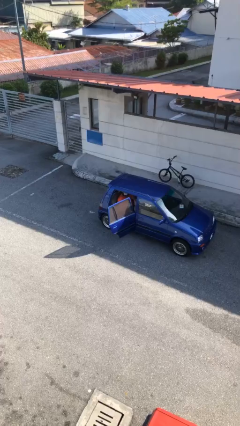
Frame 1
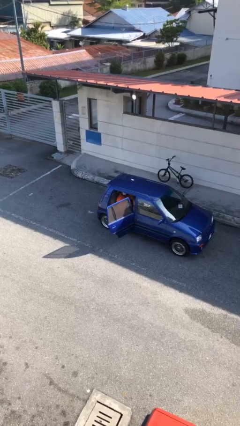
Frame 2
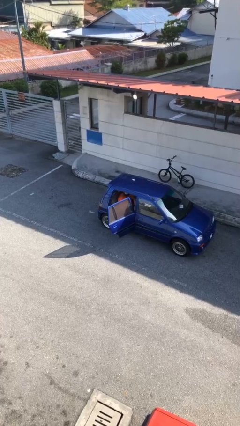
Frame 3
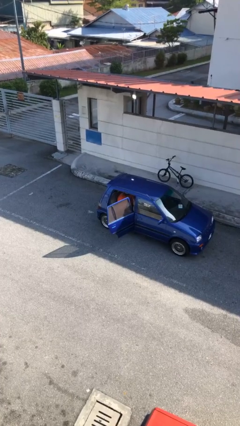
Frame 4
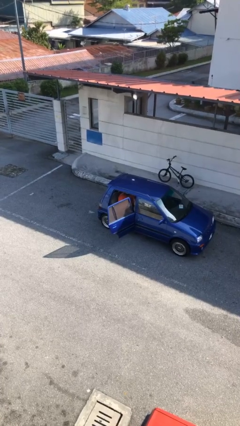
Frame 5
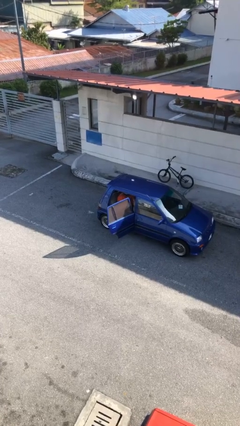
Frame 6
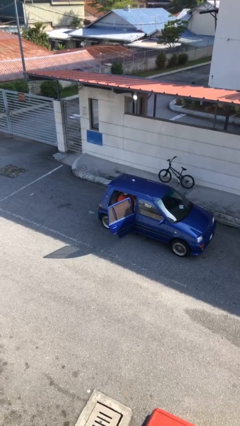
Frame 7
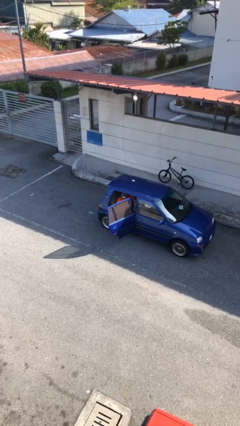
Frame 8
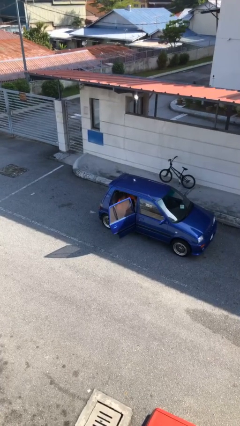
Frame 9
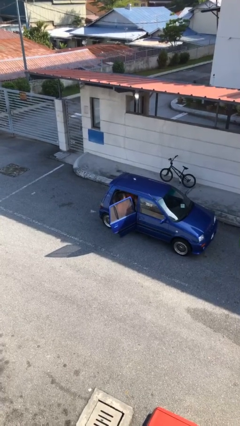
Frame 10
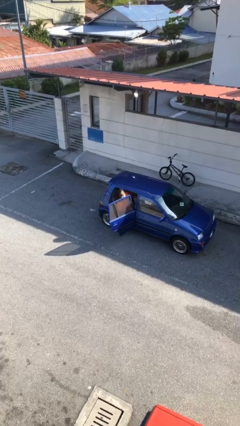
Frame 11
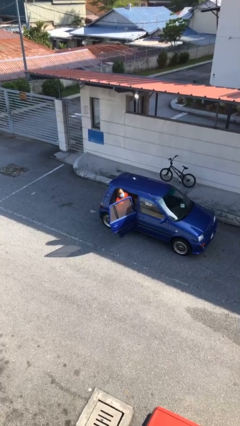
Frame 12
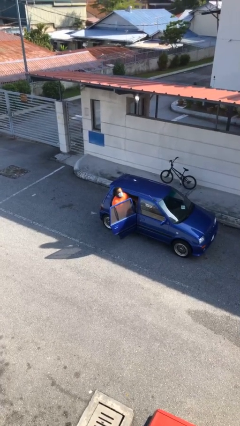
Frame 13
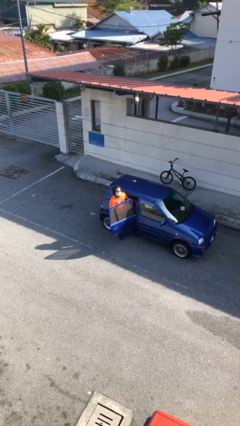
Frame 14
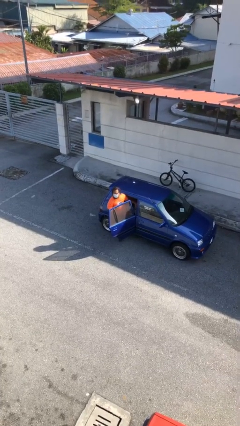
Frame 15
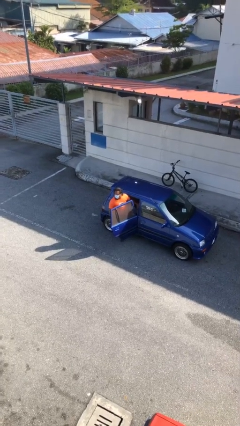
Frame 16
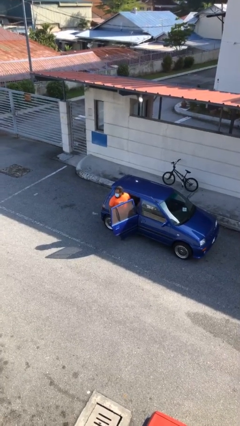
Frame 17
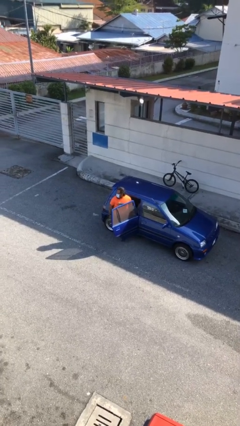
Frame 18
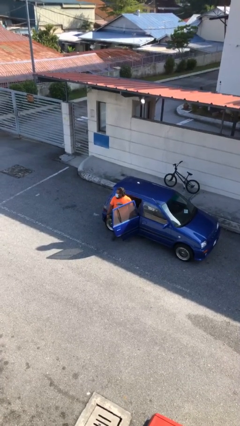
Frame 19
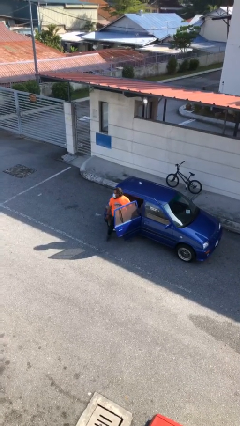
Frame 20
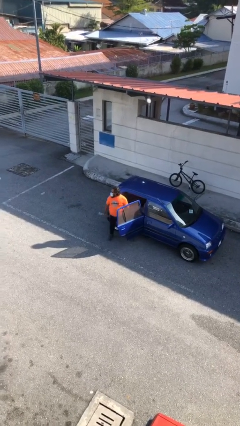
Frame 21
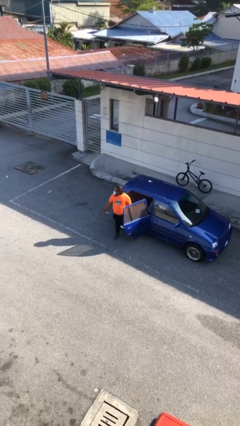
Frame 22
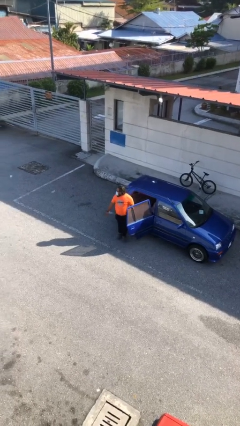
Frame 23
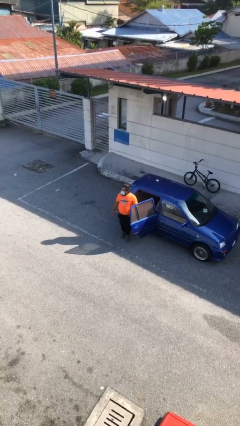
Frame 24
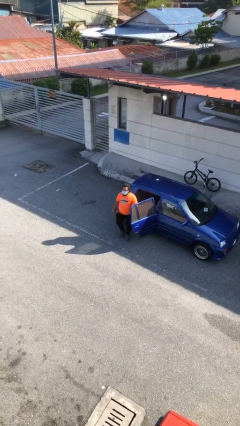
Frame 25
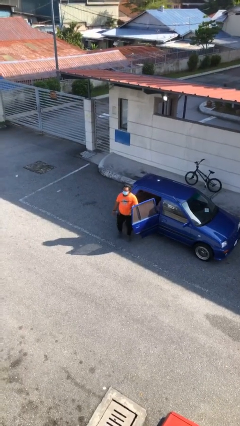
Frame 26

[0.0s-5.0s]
person exits car

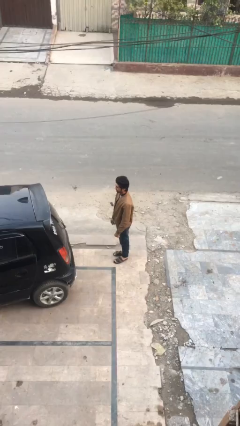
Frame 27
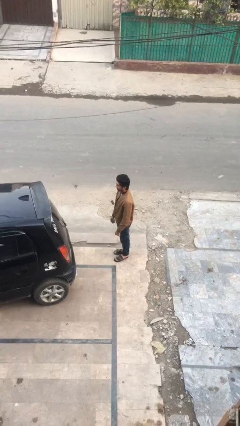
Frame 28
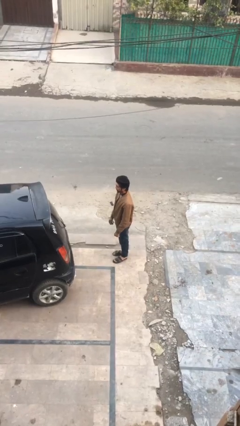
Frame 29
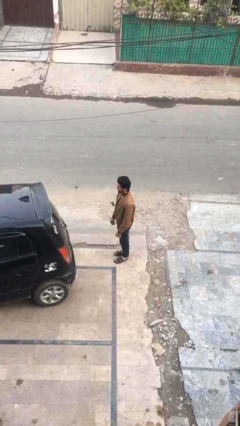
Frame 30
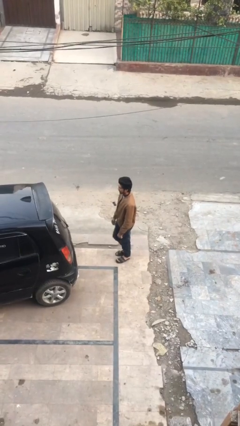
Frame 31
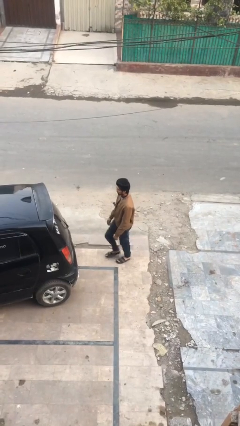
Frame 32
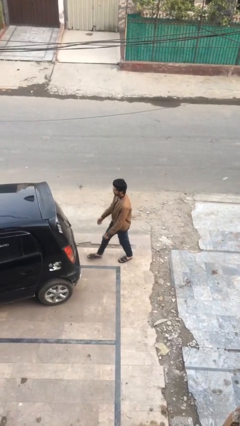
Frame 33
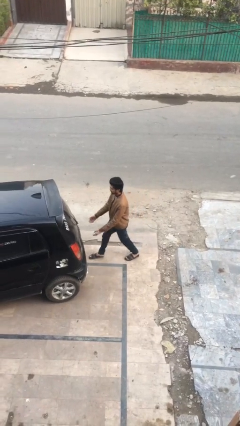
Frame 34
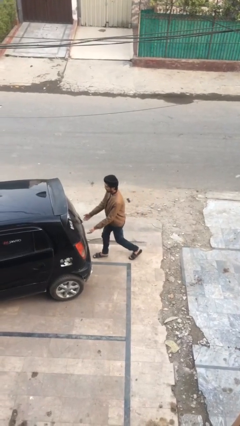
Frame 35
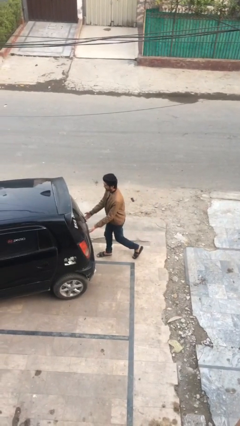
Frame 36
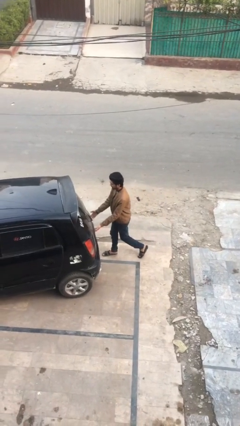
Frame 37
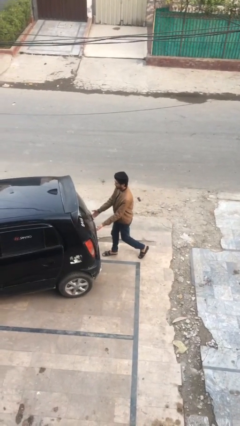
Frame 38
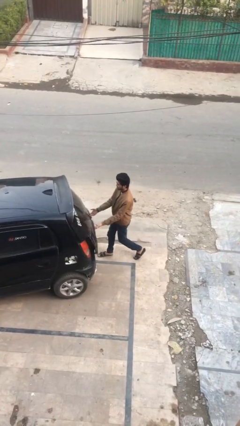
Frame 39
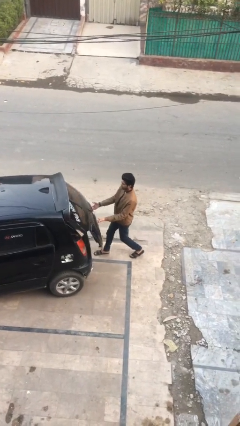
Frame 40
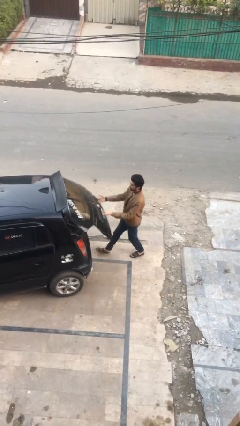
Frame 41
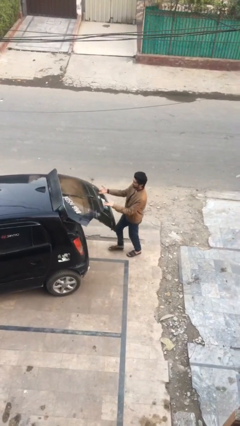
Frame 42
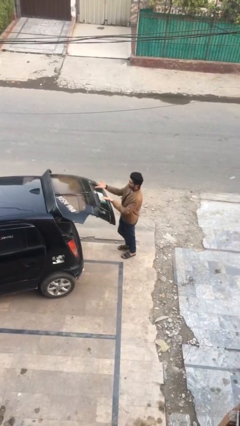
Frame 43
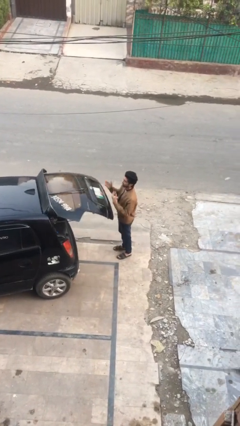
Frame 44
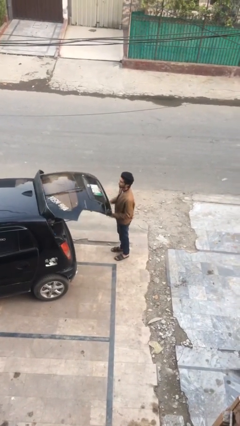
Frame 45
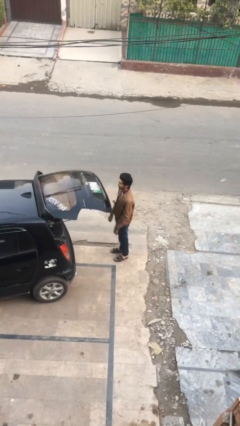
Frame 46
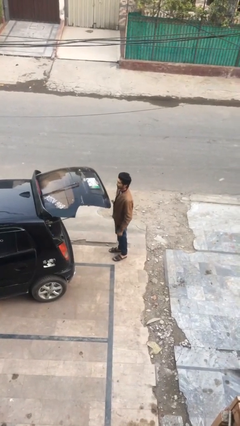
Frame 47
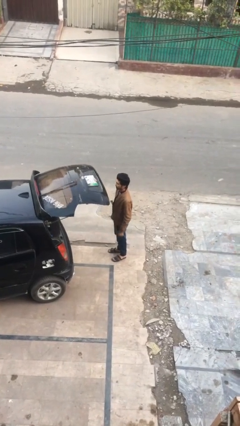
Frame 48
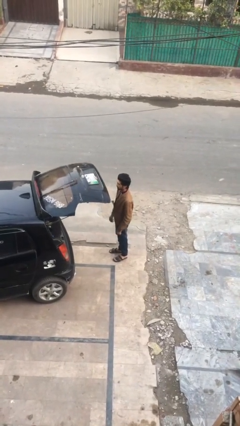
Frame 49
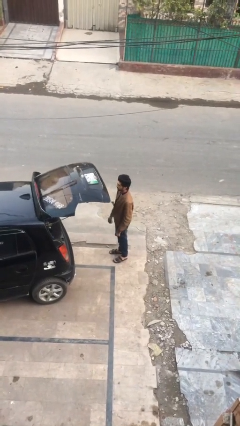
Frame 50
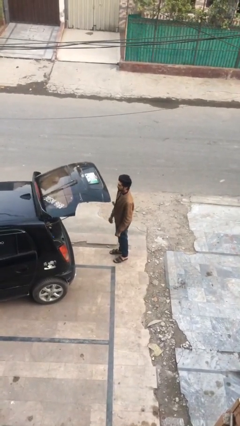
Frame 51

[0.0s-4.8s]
person opens car trunk

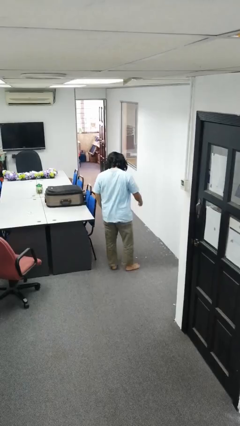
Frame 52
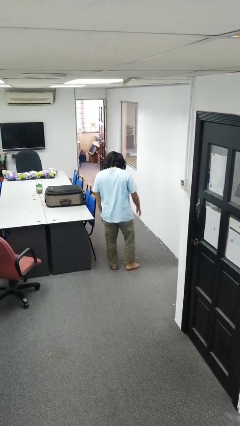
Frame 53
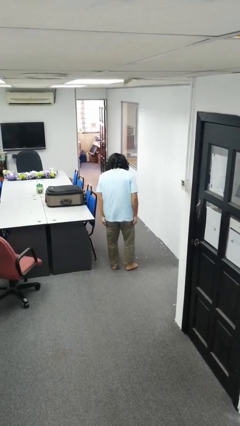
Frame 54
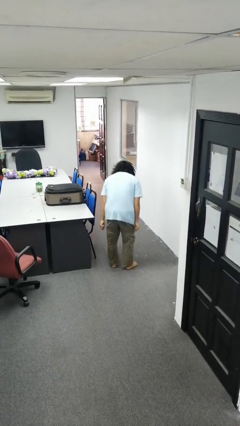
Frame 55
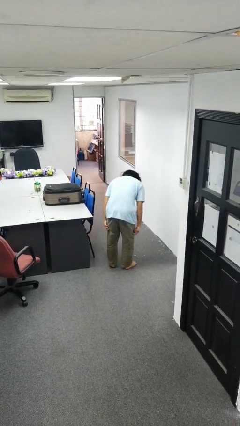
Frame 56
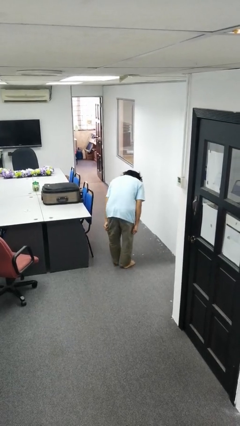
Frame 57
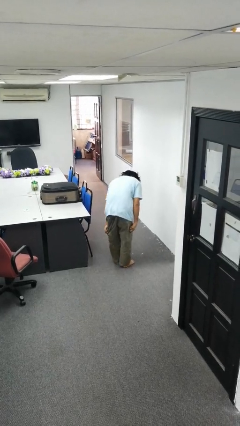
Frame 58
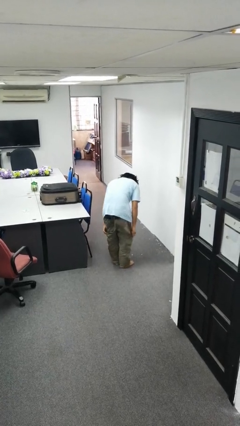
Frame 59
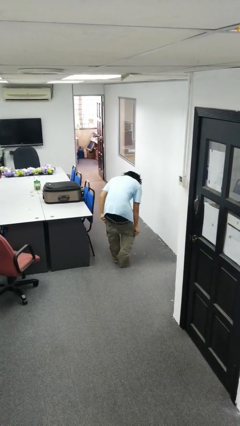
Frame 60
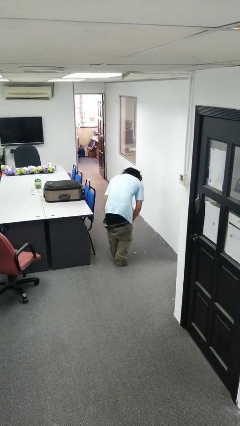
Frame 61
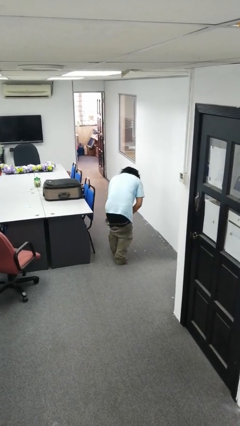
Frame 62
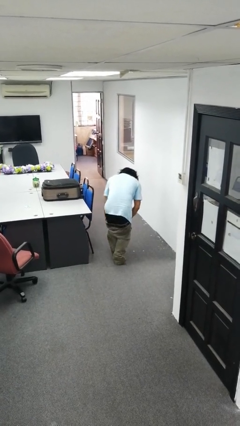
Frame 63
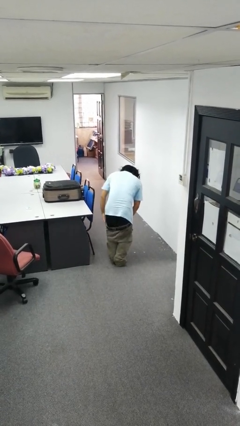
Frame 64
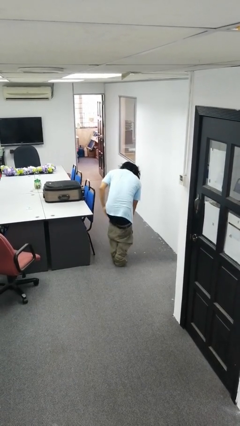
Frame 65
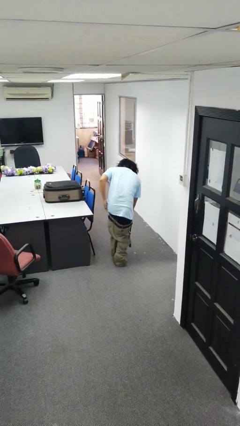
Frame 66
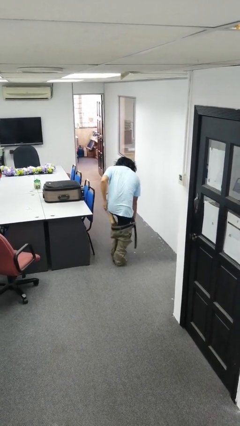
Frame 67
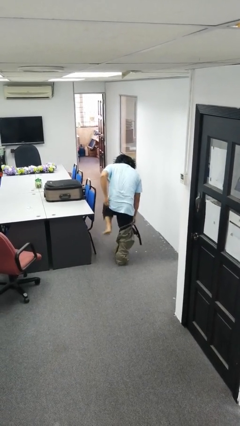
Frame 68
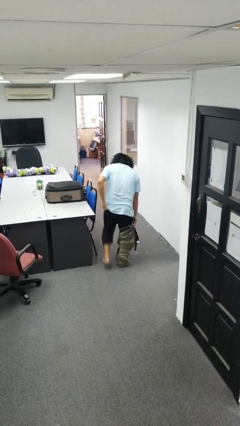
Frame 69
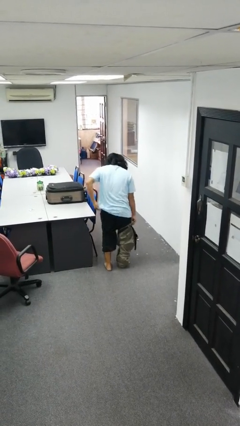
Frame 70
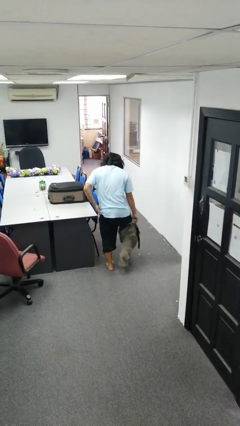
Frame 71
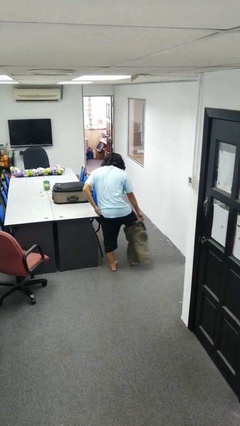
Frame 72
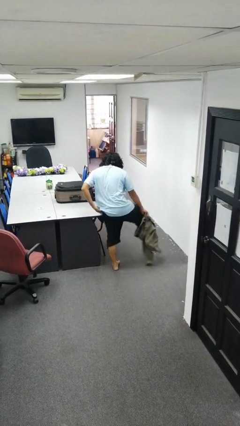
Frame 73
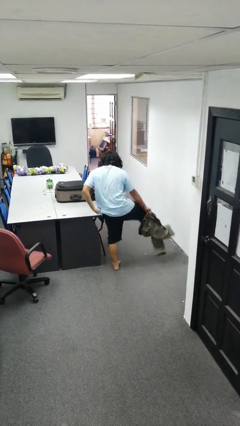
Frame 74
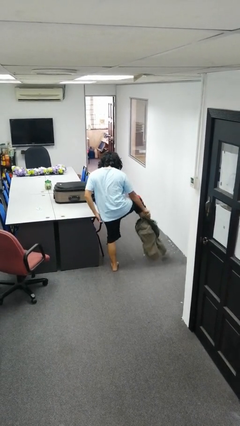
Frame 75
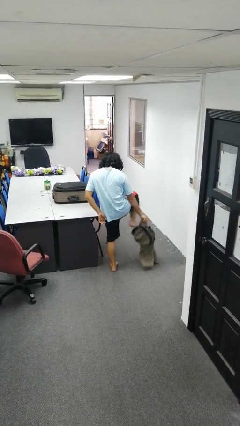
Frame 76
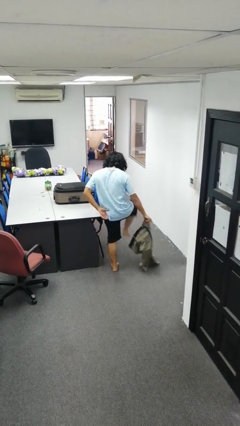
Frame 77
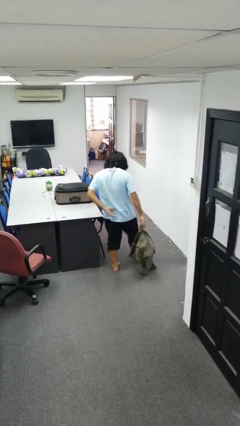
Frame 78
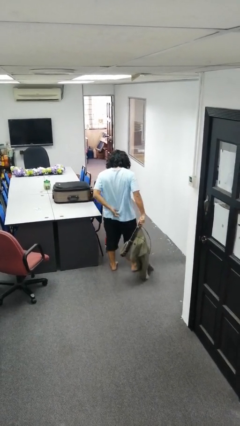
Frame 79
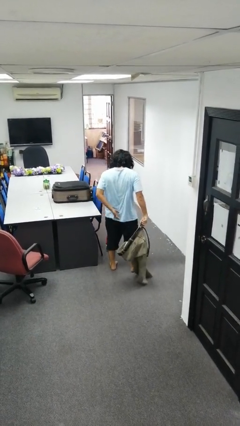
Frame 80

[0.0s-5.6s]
person puts on pants

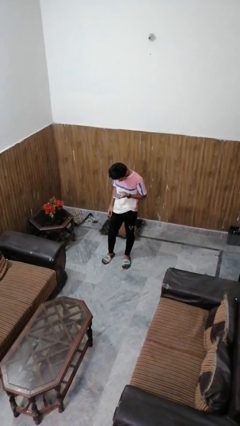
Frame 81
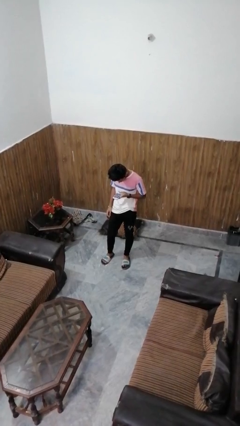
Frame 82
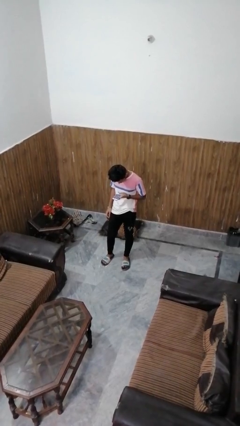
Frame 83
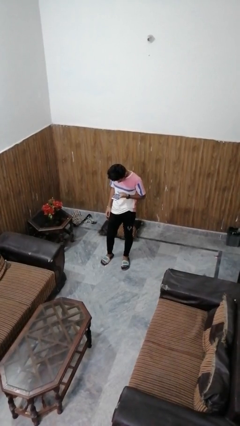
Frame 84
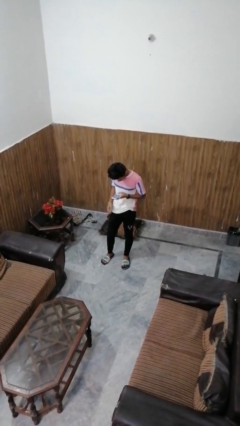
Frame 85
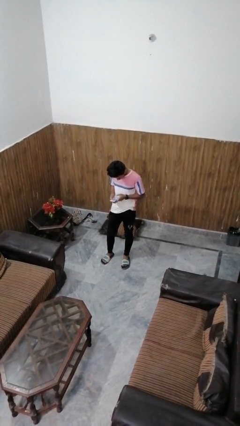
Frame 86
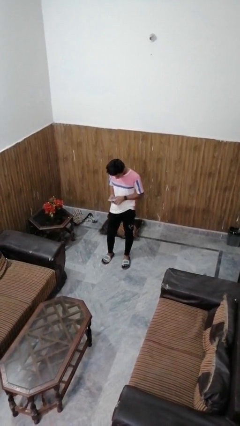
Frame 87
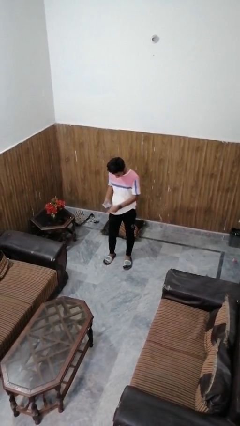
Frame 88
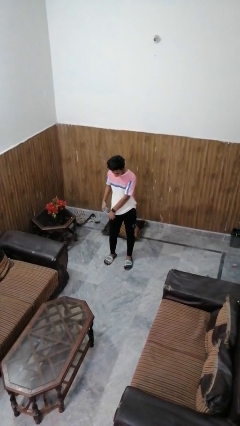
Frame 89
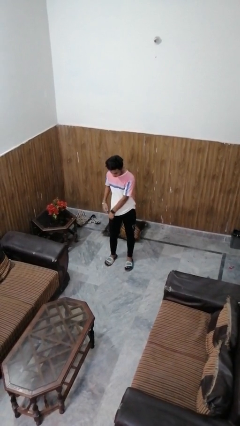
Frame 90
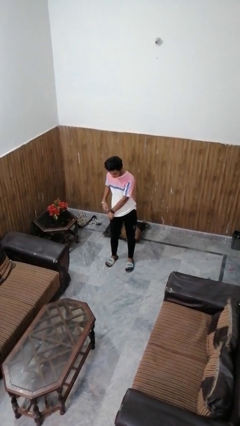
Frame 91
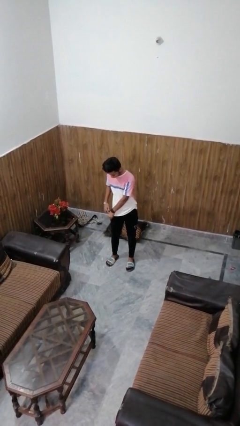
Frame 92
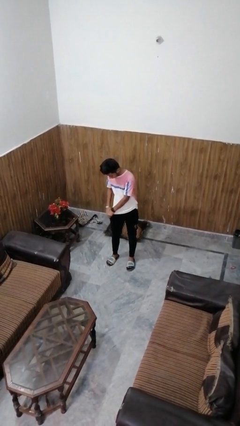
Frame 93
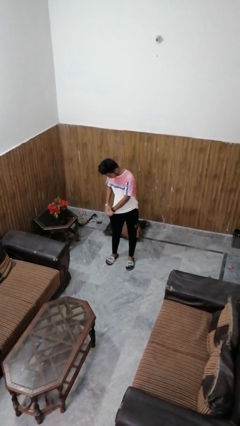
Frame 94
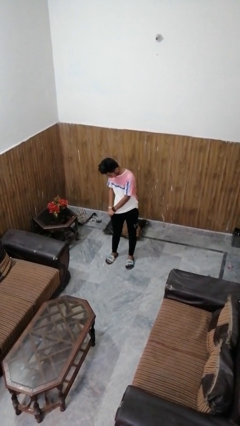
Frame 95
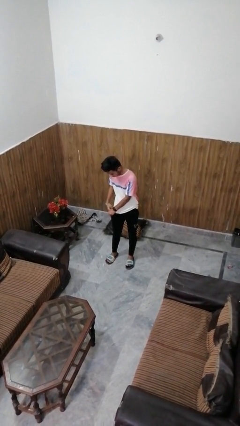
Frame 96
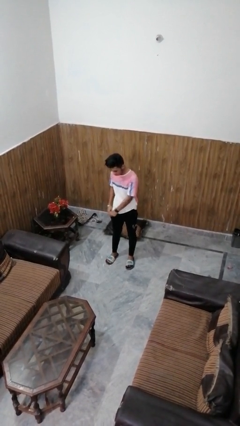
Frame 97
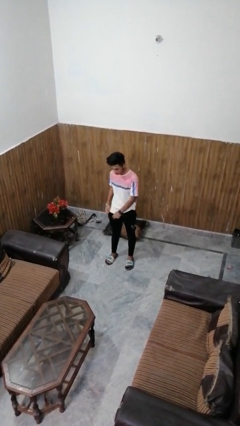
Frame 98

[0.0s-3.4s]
person puts phone into pocket
